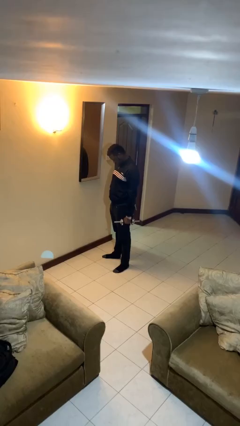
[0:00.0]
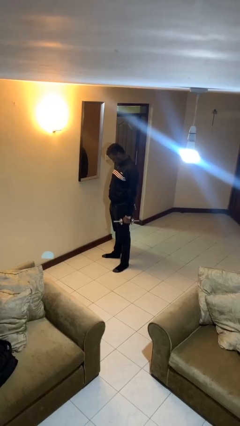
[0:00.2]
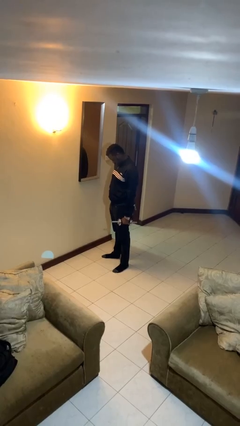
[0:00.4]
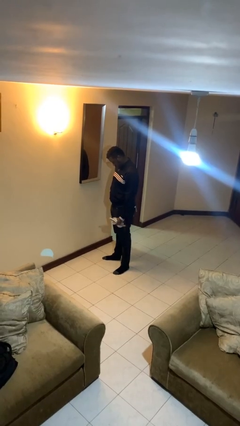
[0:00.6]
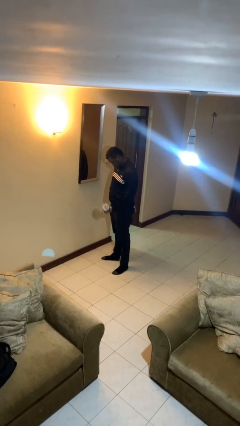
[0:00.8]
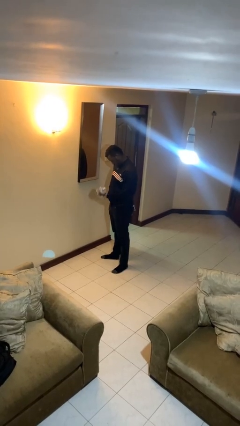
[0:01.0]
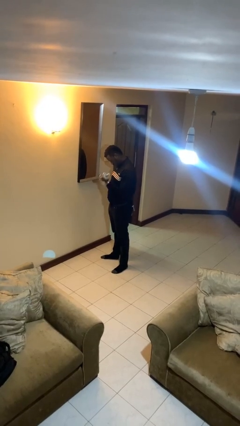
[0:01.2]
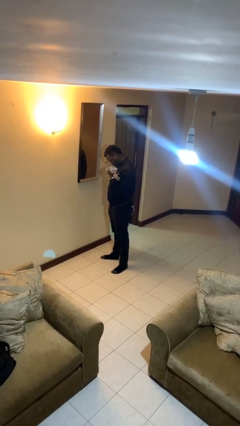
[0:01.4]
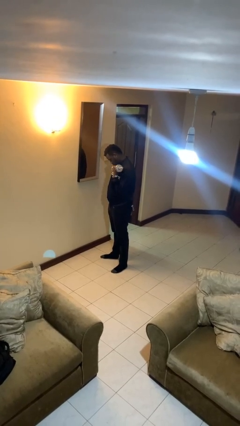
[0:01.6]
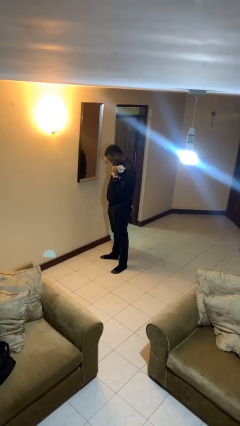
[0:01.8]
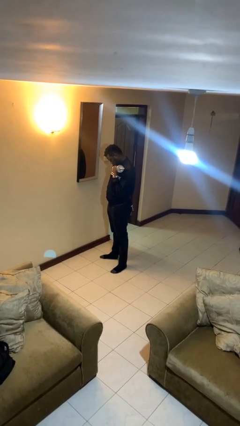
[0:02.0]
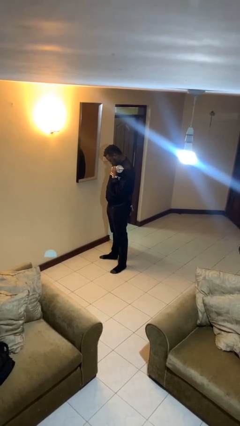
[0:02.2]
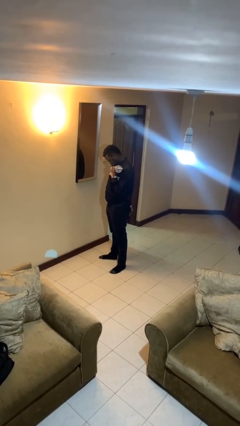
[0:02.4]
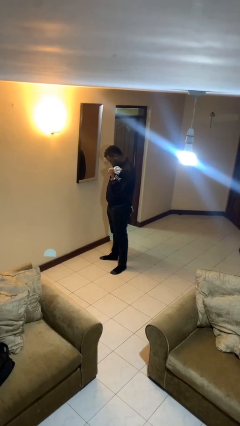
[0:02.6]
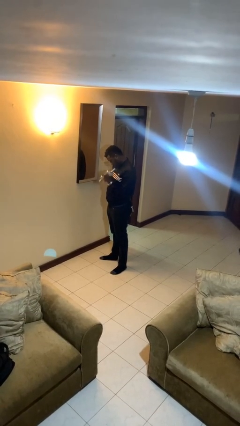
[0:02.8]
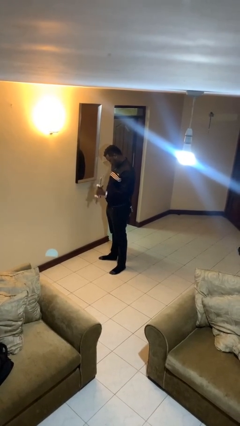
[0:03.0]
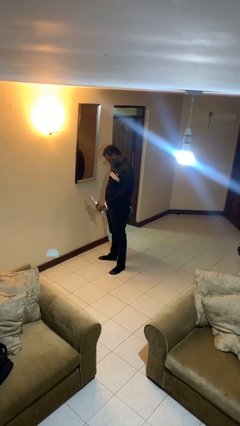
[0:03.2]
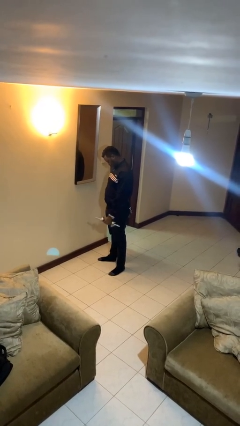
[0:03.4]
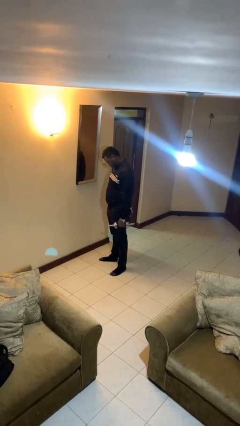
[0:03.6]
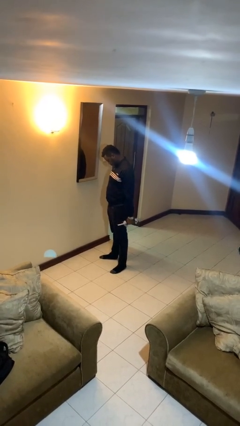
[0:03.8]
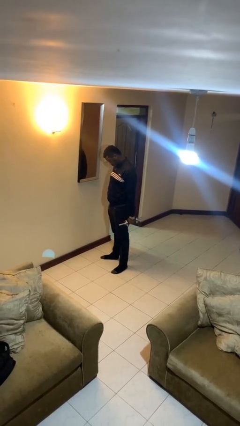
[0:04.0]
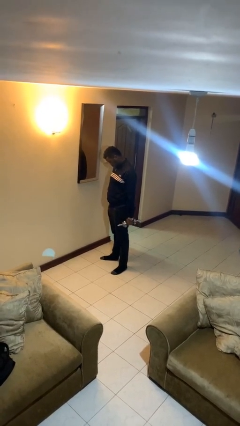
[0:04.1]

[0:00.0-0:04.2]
person lifts dumbbells

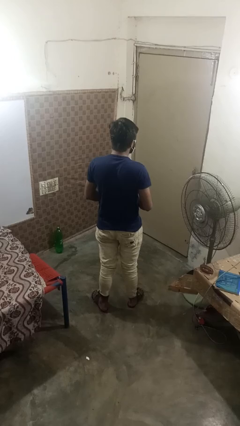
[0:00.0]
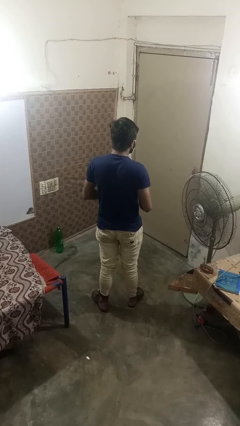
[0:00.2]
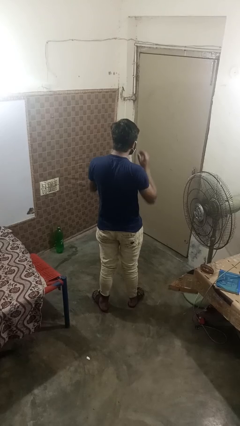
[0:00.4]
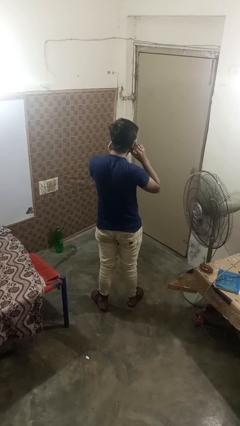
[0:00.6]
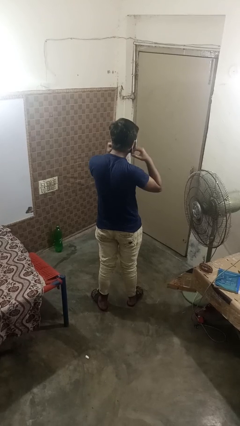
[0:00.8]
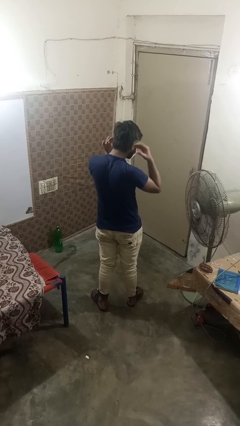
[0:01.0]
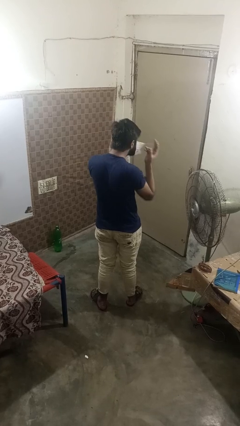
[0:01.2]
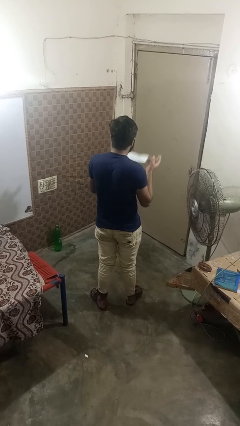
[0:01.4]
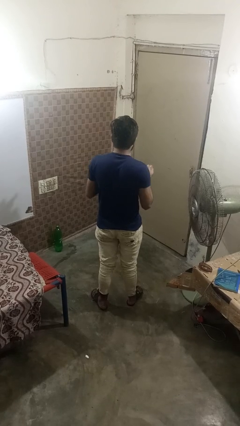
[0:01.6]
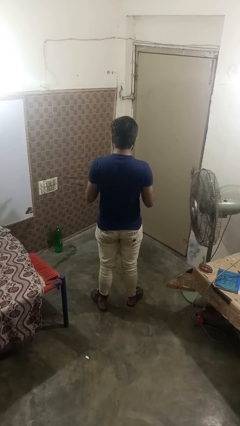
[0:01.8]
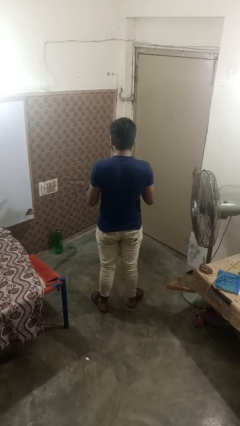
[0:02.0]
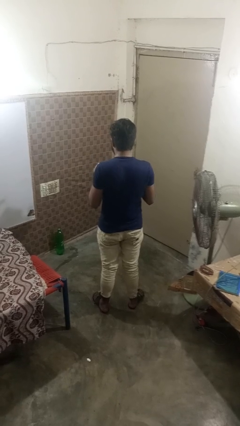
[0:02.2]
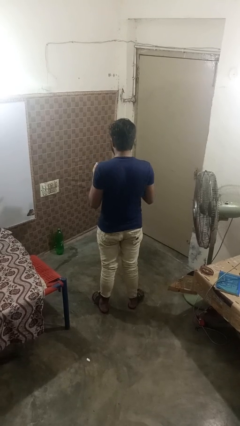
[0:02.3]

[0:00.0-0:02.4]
person takes off facemask

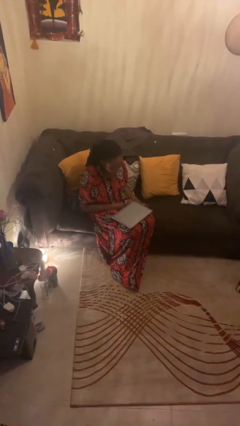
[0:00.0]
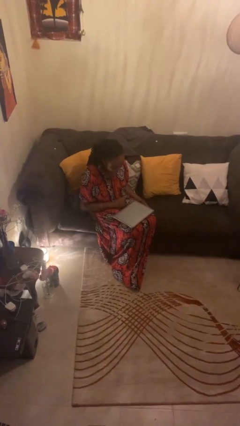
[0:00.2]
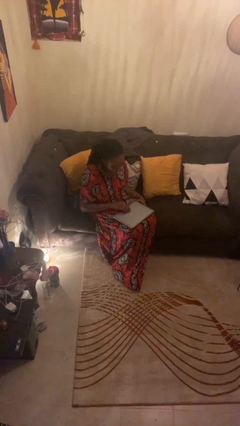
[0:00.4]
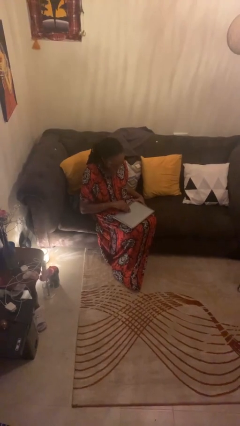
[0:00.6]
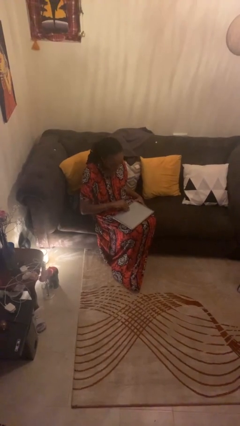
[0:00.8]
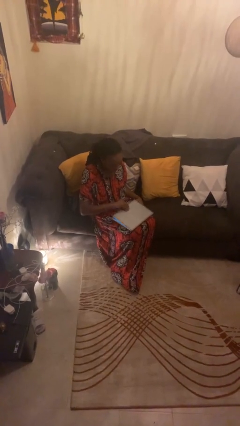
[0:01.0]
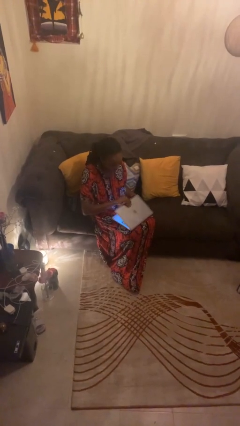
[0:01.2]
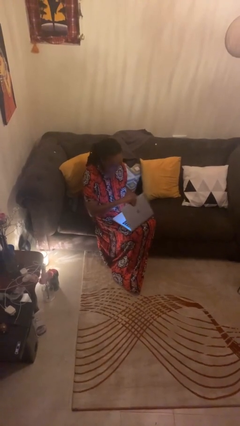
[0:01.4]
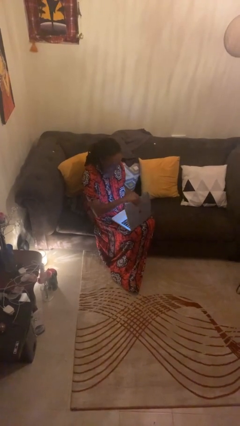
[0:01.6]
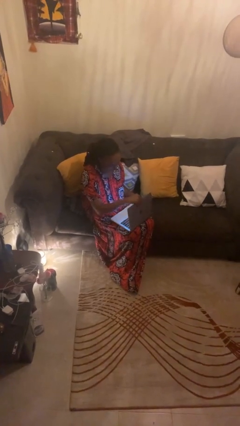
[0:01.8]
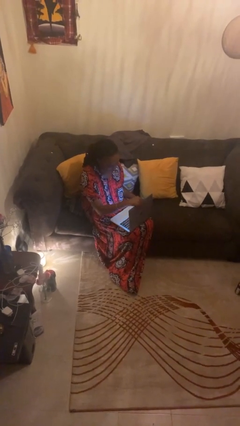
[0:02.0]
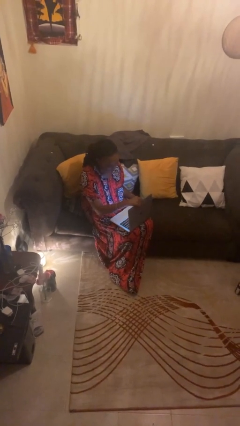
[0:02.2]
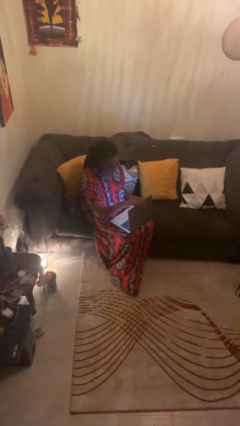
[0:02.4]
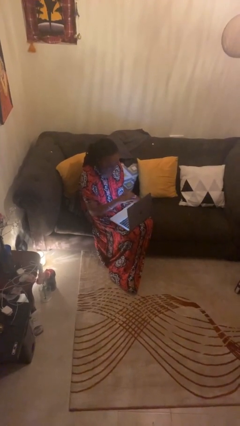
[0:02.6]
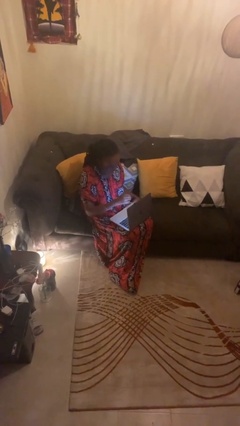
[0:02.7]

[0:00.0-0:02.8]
person opens laptop

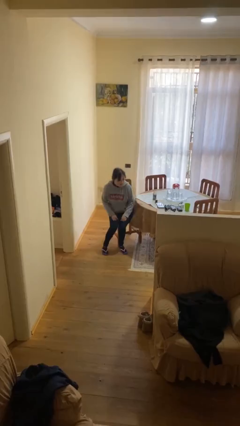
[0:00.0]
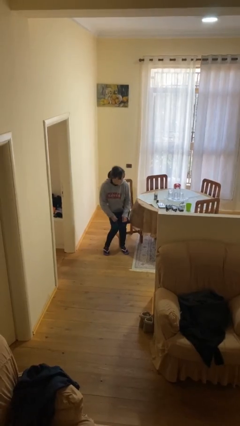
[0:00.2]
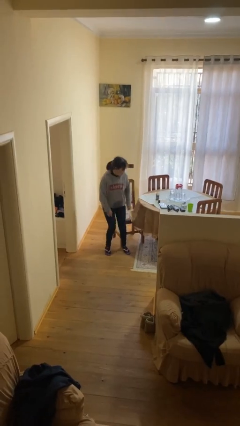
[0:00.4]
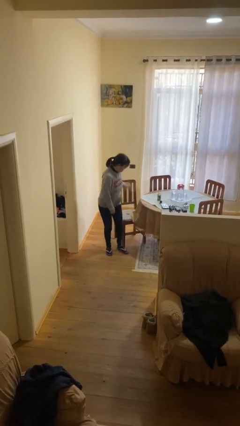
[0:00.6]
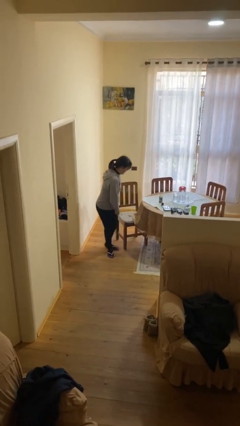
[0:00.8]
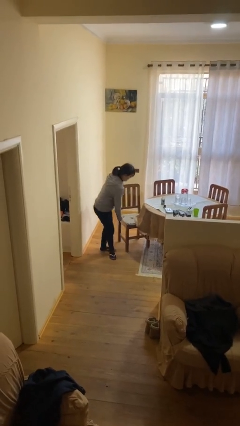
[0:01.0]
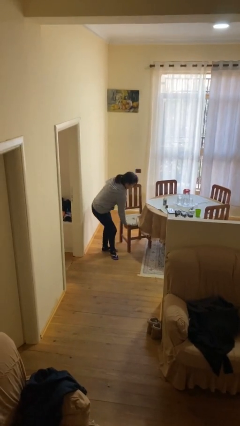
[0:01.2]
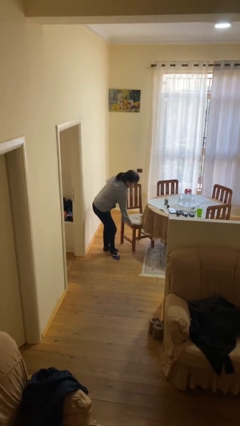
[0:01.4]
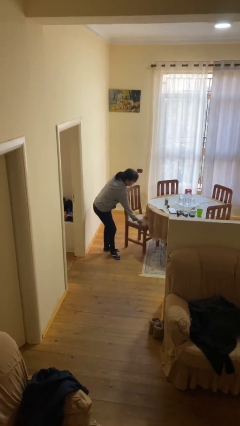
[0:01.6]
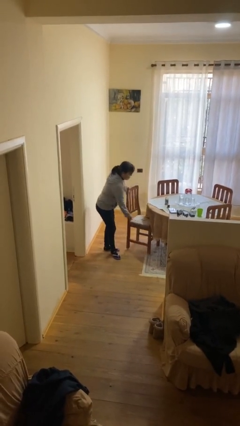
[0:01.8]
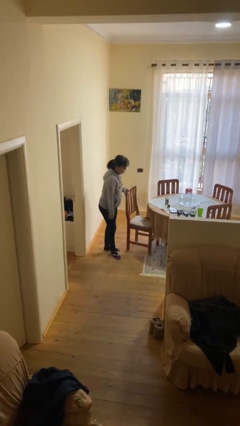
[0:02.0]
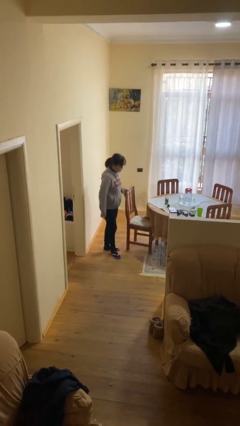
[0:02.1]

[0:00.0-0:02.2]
person stands up

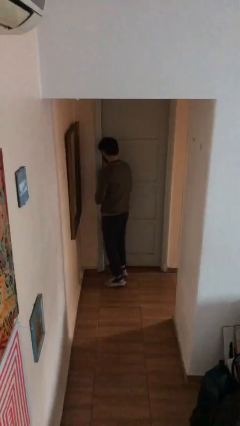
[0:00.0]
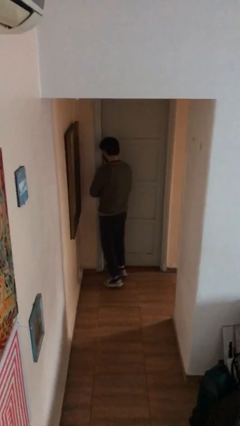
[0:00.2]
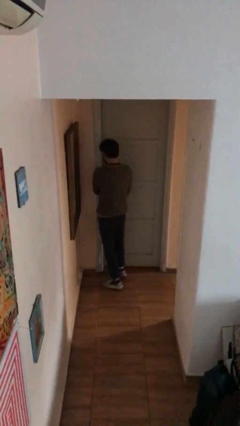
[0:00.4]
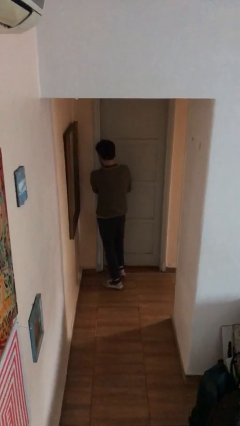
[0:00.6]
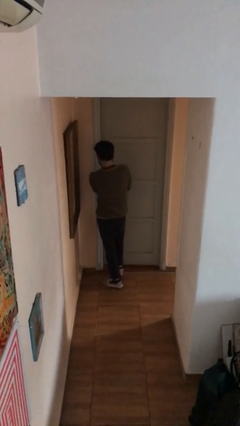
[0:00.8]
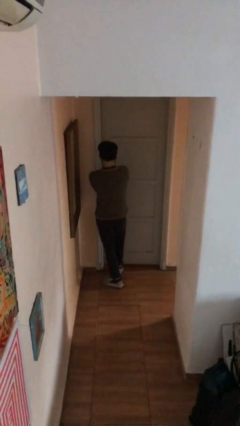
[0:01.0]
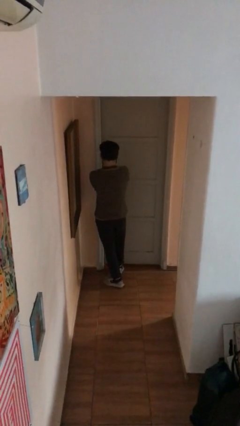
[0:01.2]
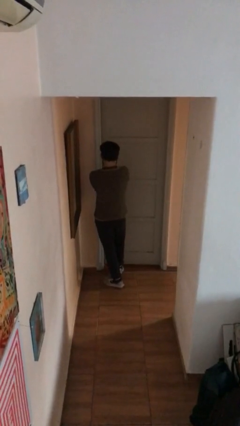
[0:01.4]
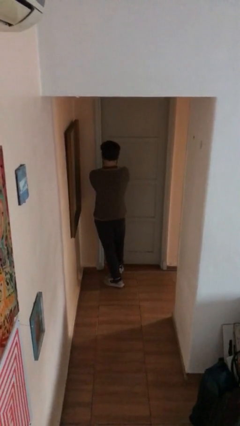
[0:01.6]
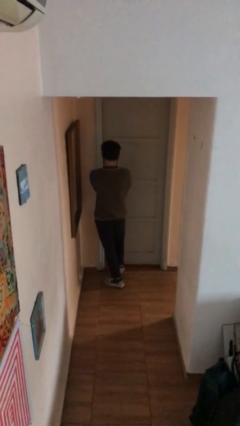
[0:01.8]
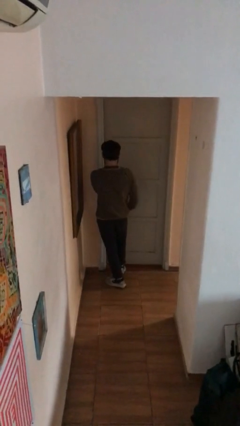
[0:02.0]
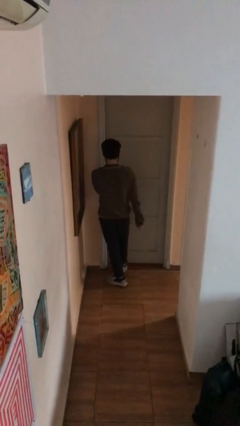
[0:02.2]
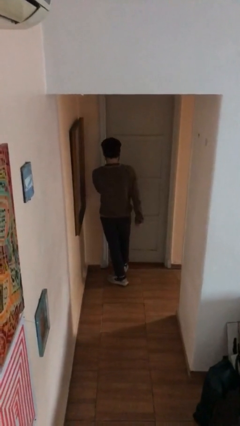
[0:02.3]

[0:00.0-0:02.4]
person locks door with keys

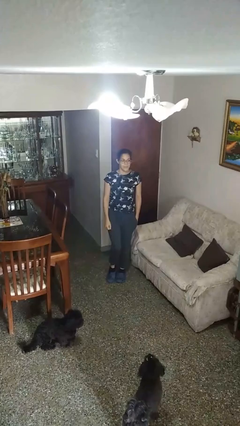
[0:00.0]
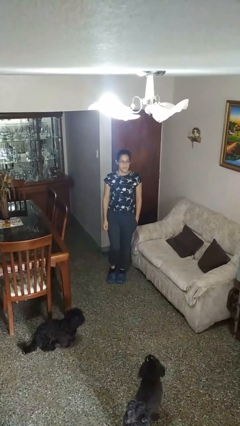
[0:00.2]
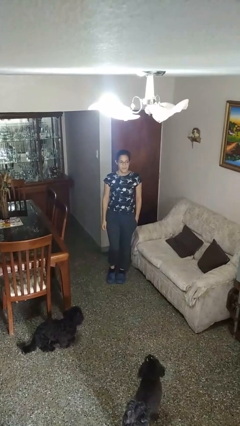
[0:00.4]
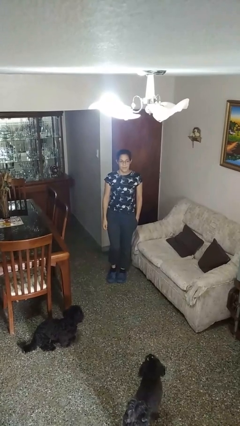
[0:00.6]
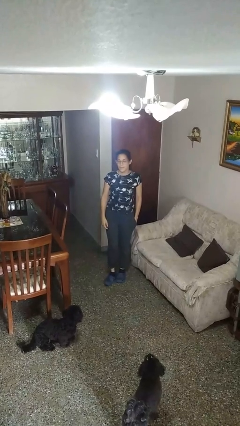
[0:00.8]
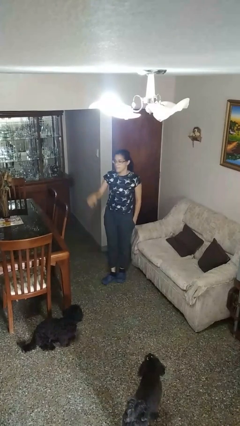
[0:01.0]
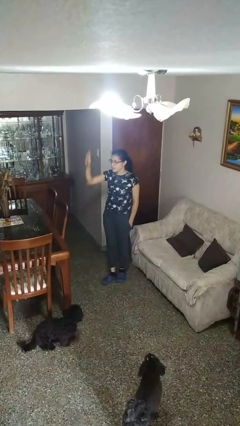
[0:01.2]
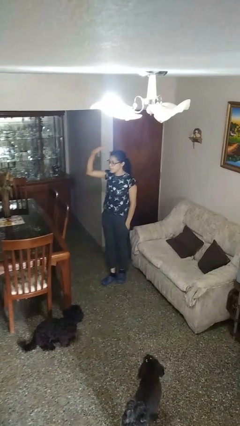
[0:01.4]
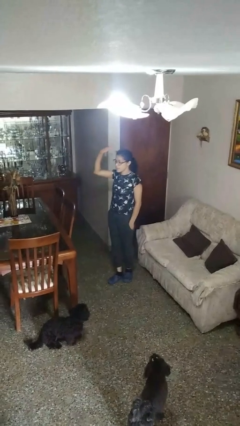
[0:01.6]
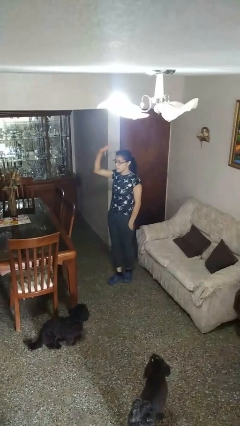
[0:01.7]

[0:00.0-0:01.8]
person gestures lower hand

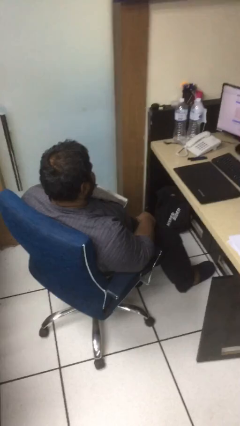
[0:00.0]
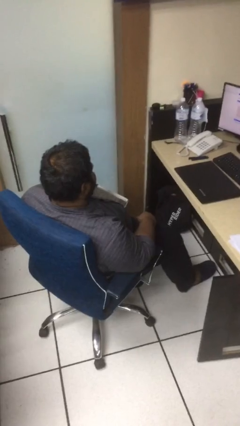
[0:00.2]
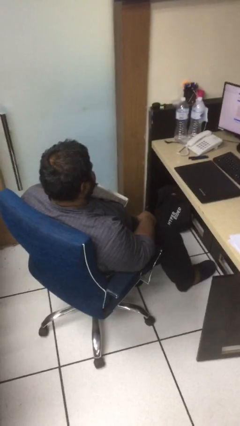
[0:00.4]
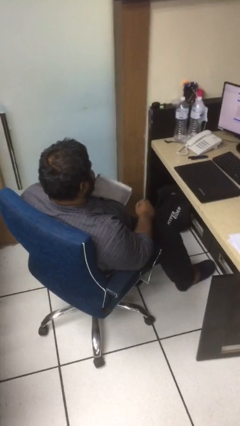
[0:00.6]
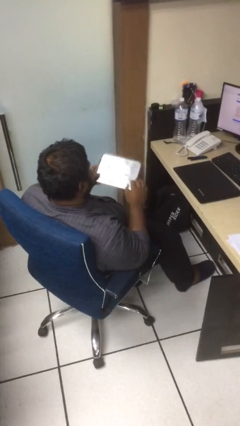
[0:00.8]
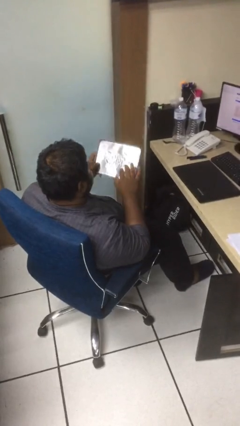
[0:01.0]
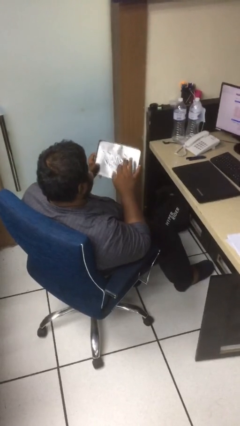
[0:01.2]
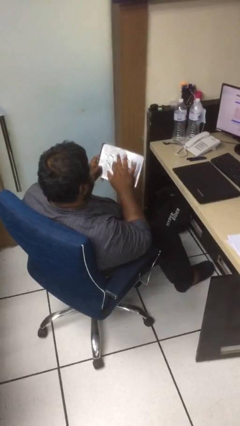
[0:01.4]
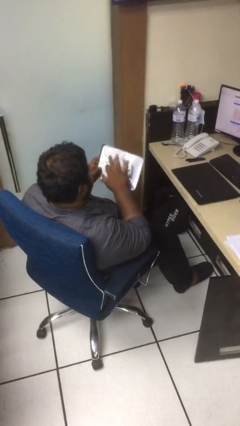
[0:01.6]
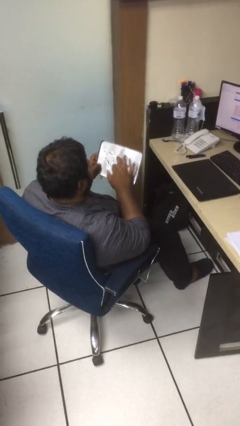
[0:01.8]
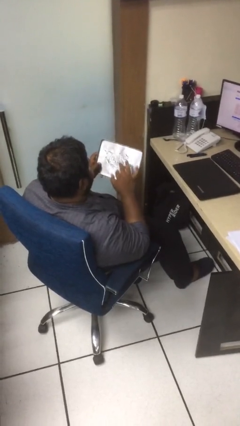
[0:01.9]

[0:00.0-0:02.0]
person interacts with tablet
